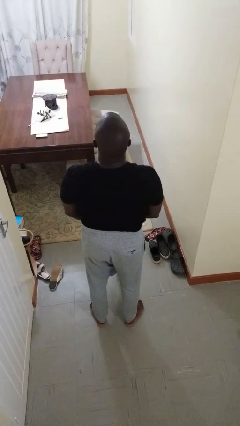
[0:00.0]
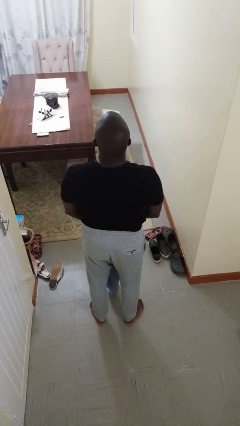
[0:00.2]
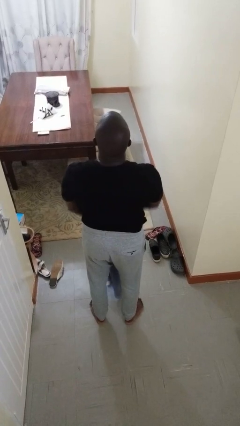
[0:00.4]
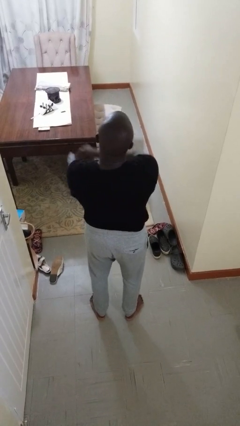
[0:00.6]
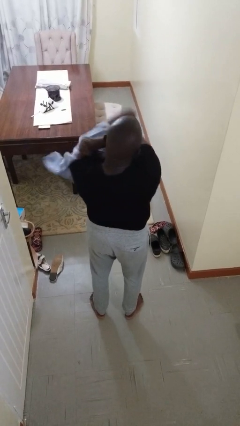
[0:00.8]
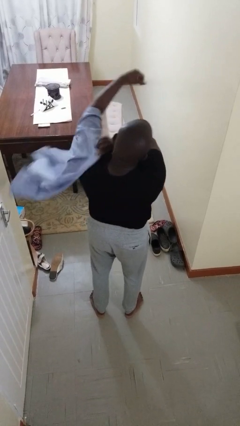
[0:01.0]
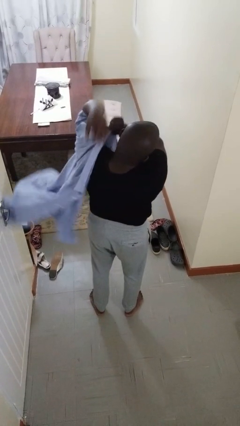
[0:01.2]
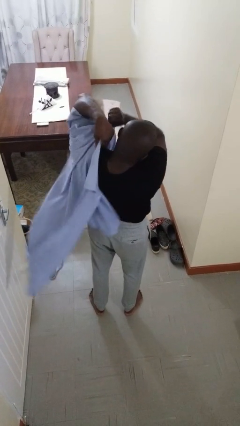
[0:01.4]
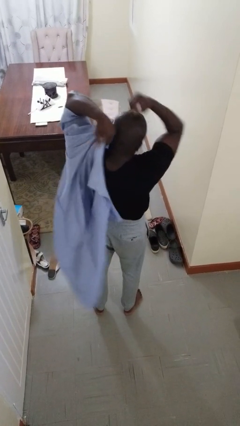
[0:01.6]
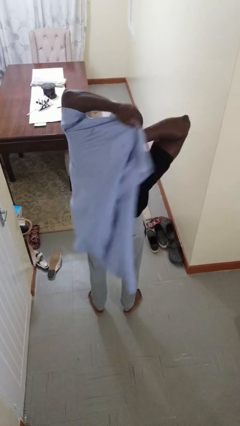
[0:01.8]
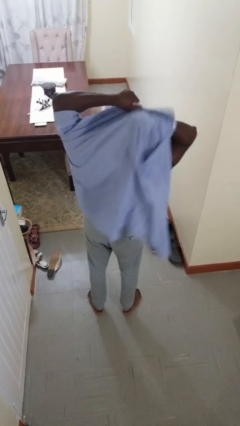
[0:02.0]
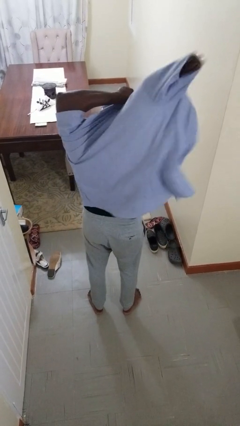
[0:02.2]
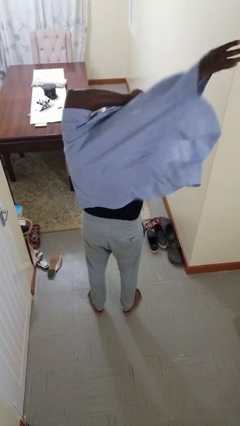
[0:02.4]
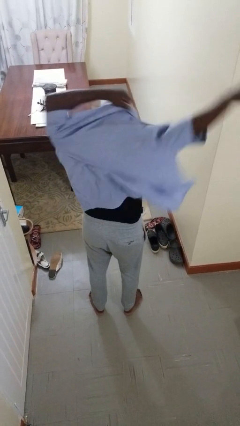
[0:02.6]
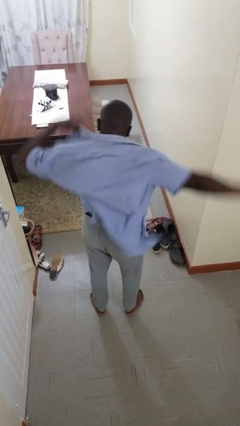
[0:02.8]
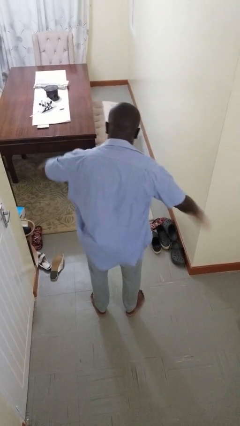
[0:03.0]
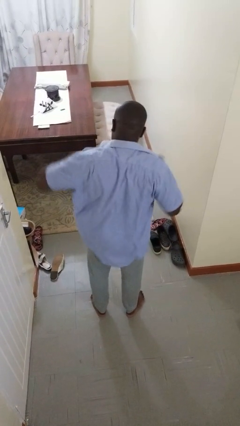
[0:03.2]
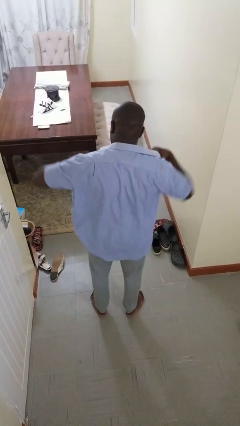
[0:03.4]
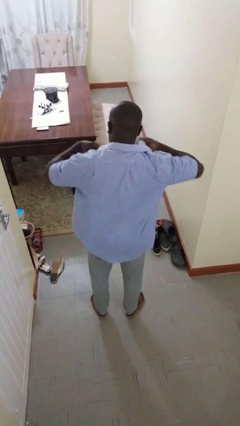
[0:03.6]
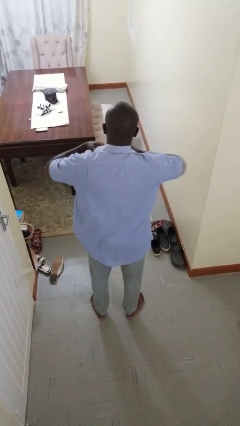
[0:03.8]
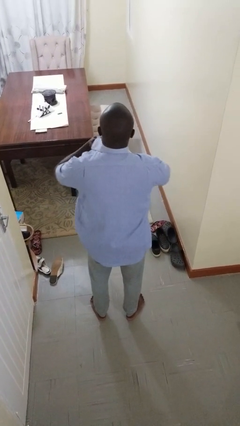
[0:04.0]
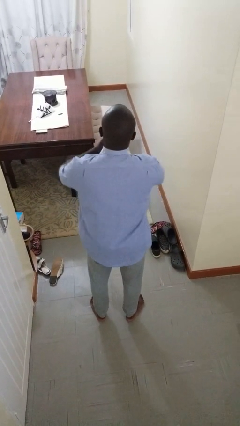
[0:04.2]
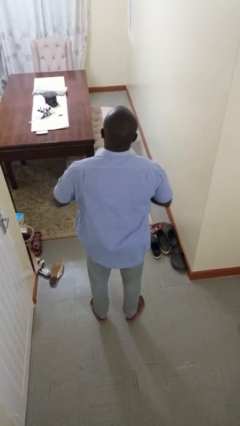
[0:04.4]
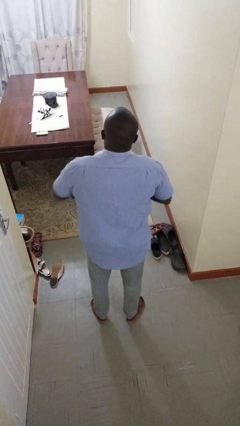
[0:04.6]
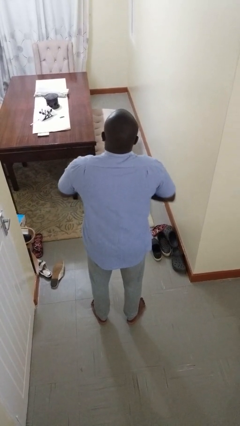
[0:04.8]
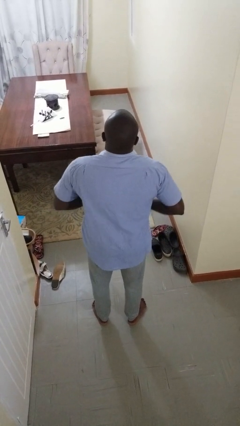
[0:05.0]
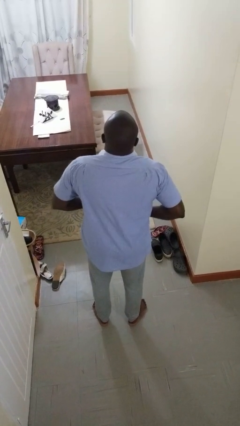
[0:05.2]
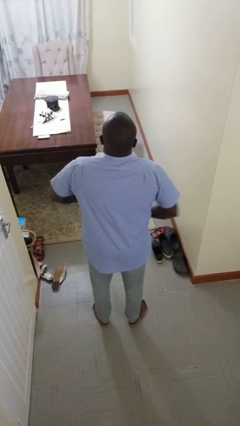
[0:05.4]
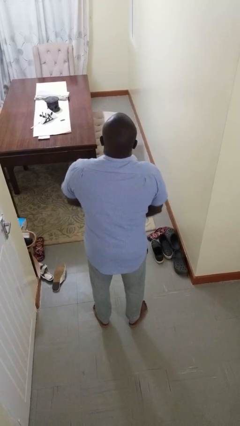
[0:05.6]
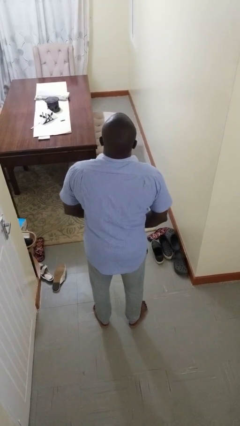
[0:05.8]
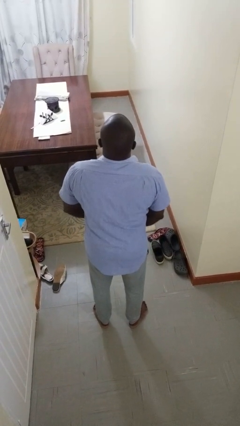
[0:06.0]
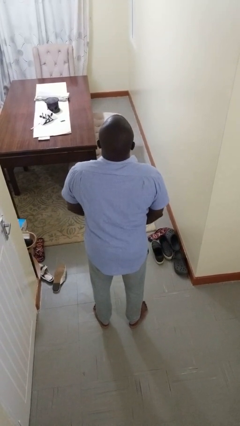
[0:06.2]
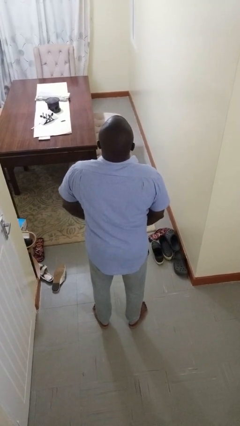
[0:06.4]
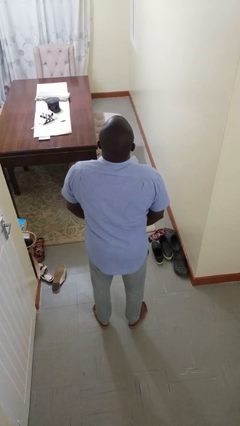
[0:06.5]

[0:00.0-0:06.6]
person puts on shirt

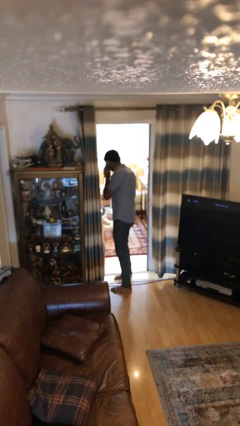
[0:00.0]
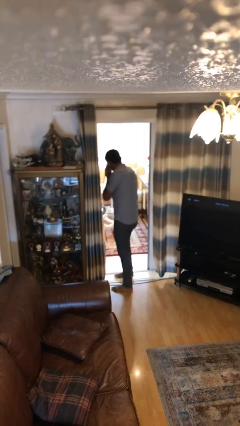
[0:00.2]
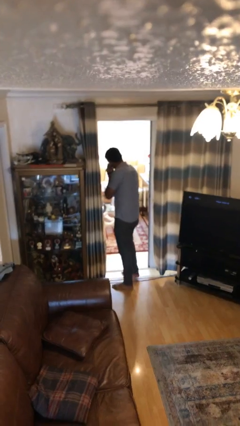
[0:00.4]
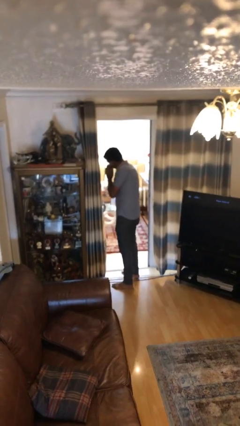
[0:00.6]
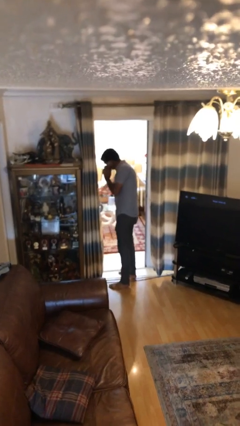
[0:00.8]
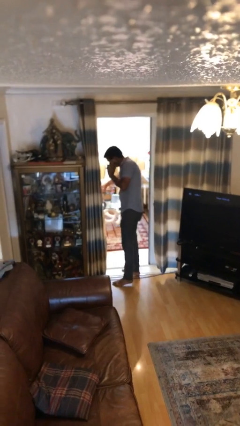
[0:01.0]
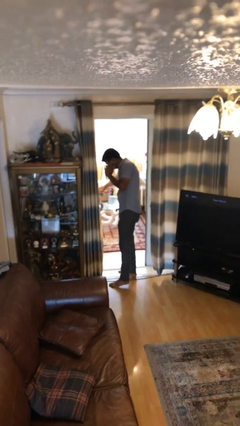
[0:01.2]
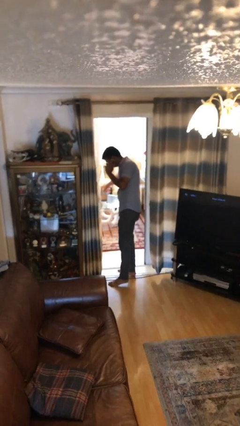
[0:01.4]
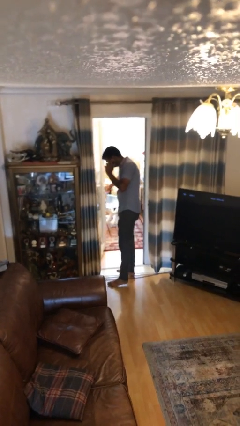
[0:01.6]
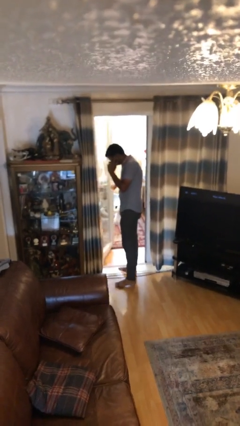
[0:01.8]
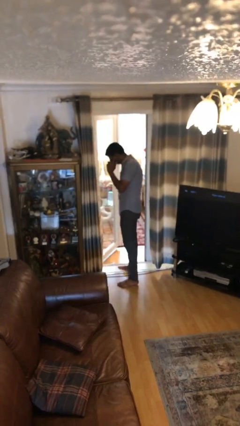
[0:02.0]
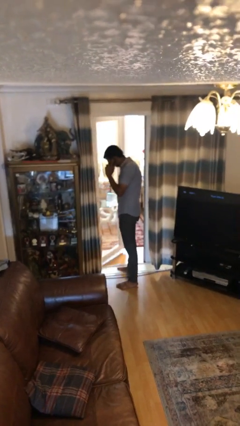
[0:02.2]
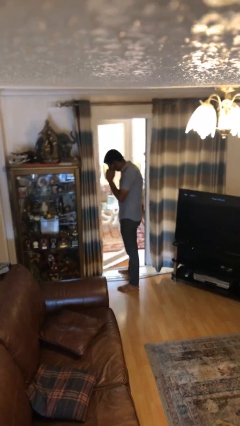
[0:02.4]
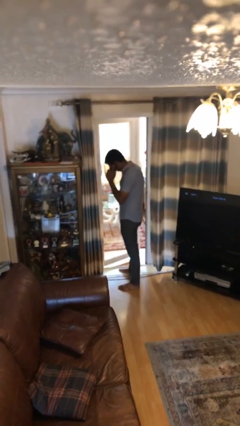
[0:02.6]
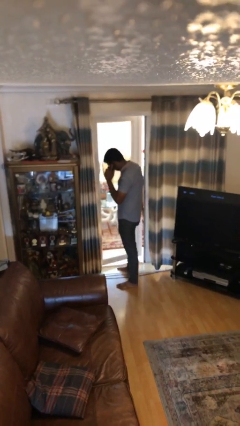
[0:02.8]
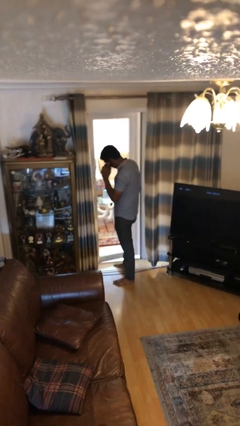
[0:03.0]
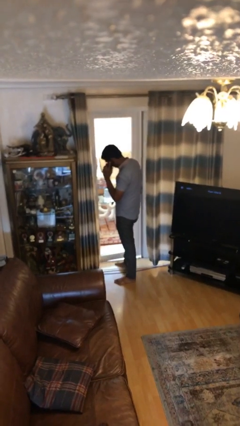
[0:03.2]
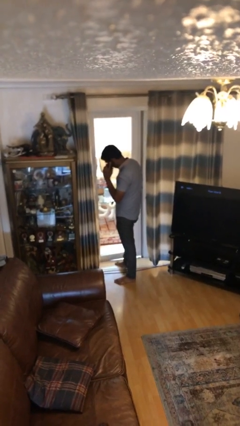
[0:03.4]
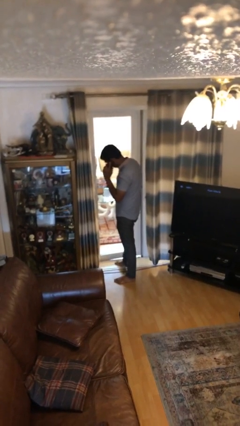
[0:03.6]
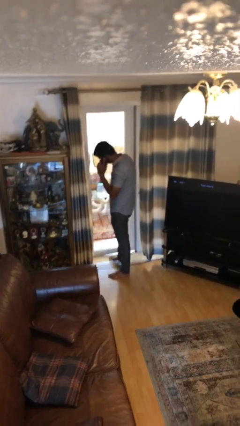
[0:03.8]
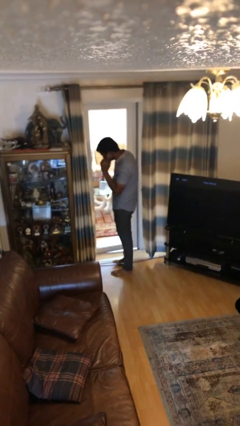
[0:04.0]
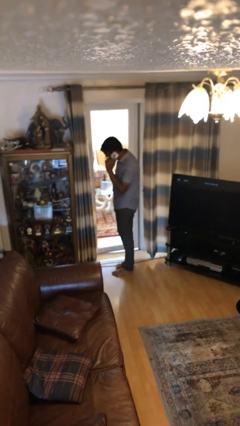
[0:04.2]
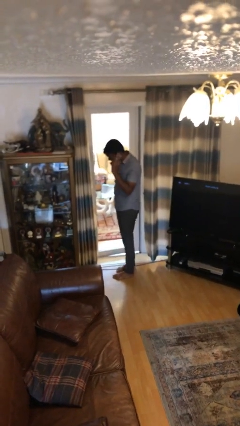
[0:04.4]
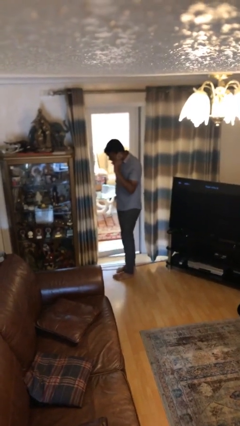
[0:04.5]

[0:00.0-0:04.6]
person closes facility door

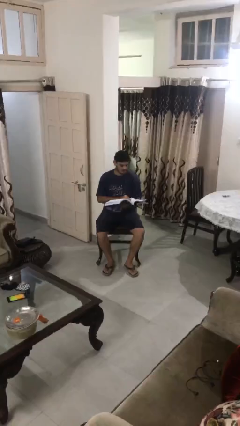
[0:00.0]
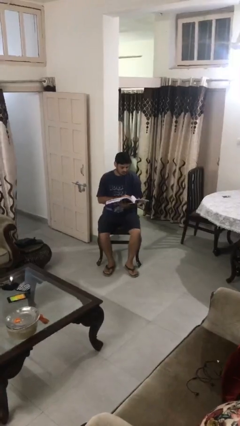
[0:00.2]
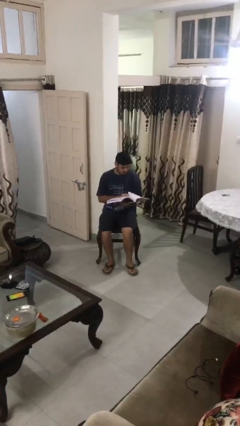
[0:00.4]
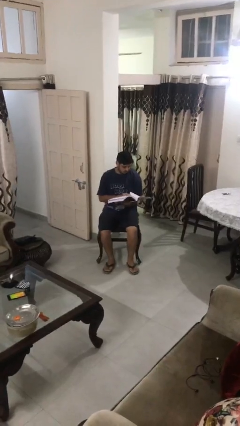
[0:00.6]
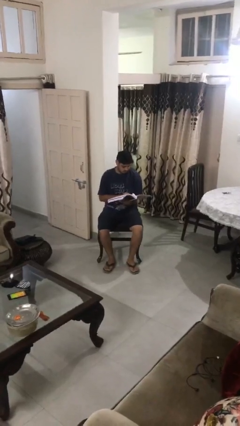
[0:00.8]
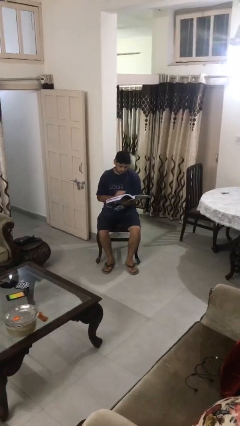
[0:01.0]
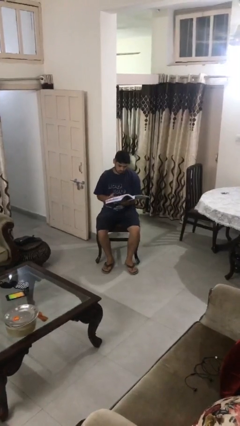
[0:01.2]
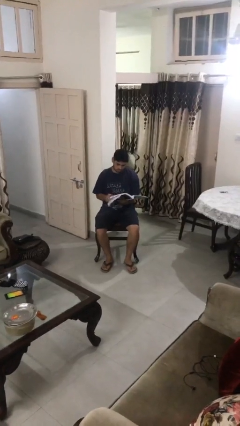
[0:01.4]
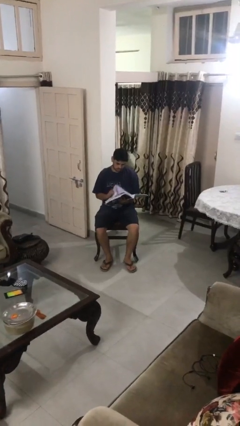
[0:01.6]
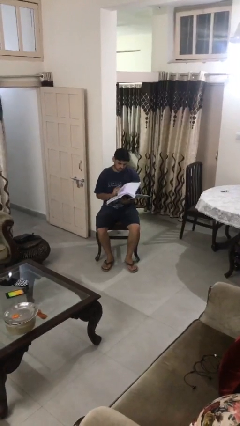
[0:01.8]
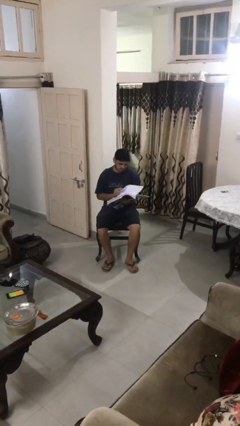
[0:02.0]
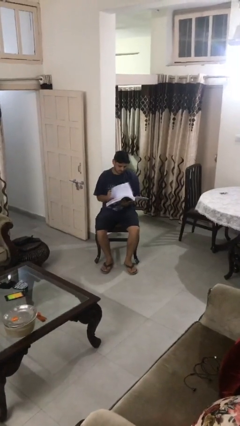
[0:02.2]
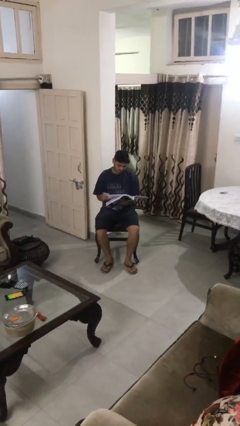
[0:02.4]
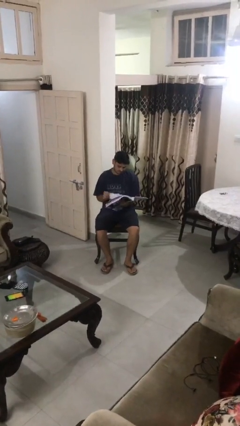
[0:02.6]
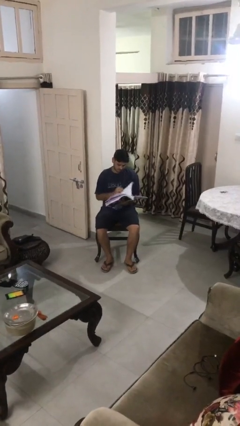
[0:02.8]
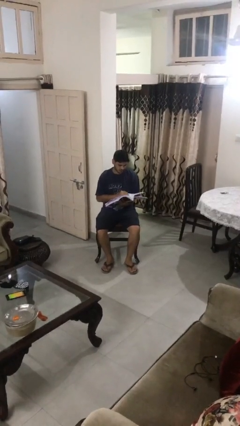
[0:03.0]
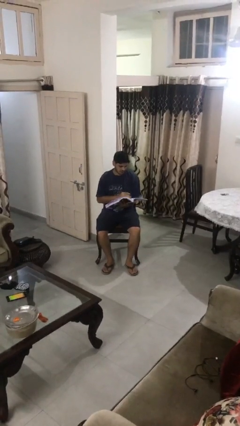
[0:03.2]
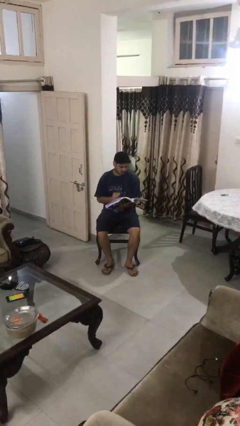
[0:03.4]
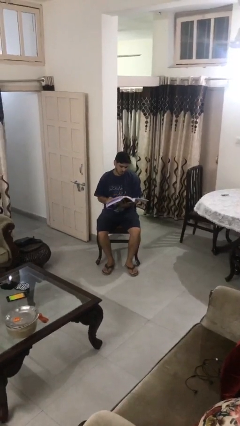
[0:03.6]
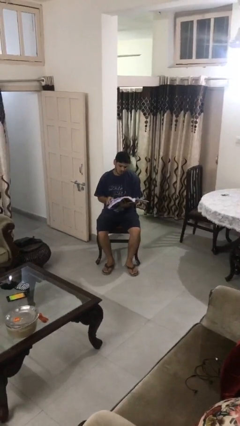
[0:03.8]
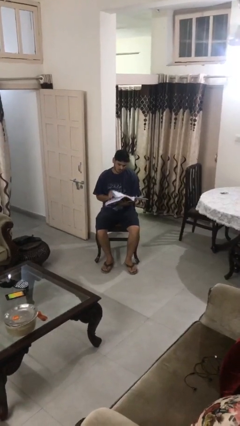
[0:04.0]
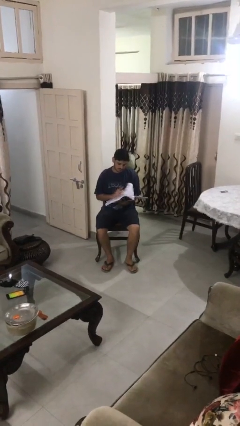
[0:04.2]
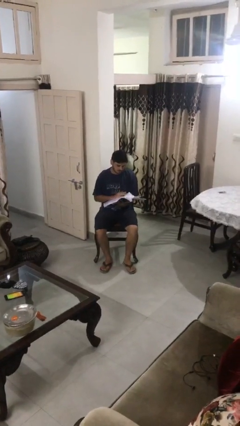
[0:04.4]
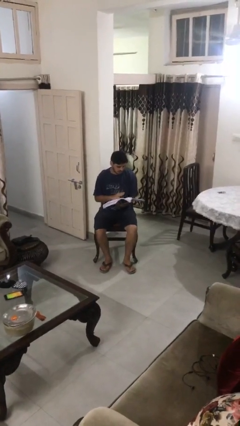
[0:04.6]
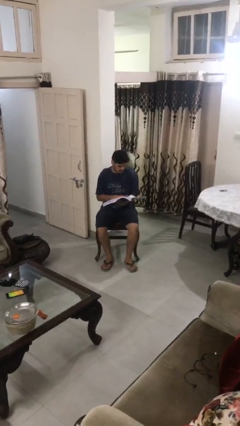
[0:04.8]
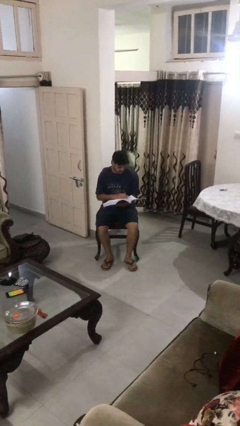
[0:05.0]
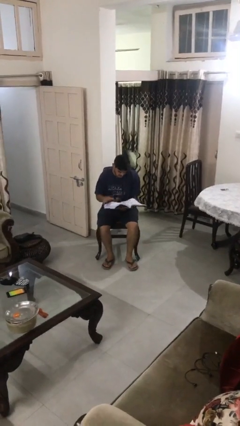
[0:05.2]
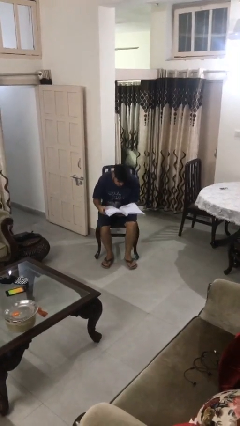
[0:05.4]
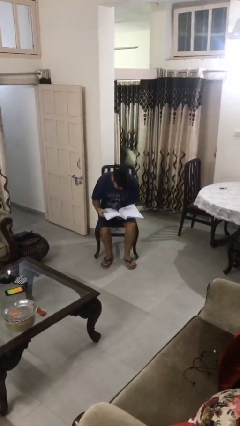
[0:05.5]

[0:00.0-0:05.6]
person reads document

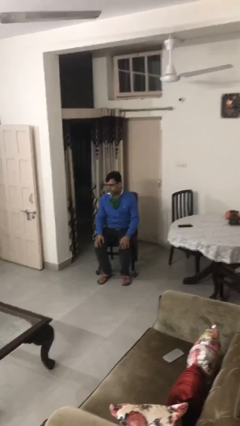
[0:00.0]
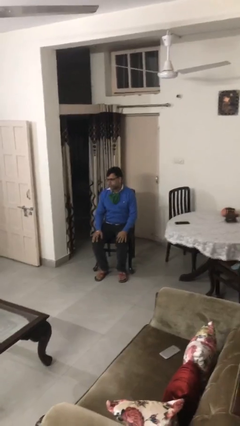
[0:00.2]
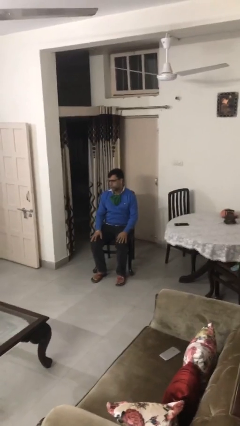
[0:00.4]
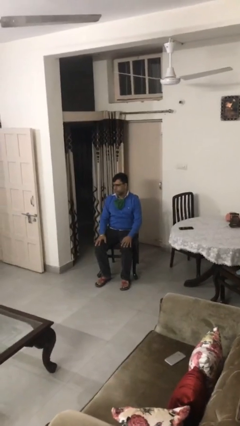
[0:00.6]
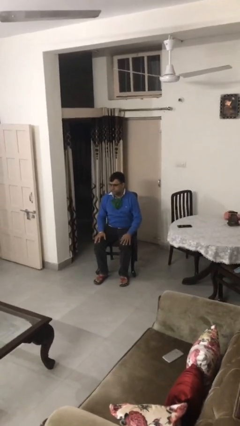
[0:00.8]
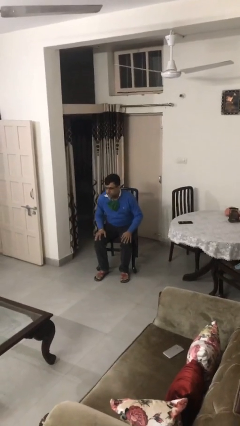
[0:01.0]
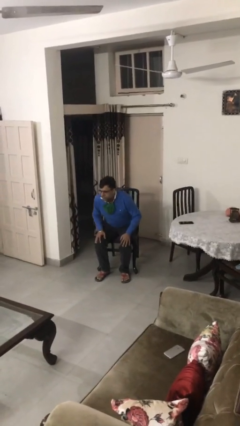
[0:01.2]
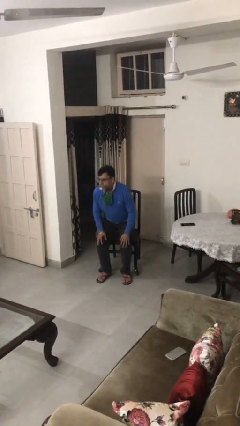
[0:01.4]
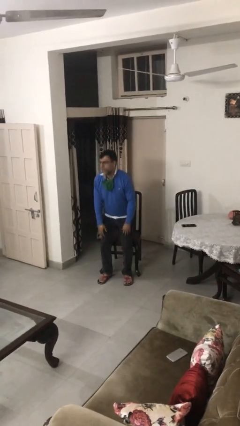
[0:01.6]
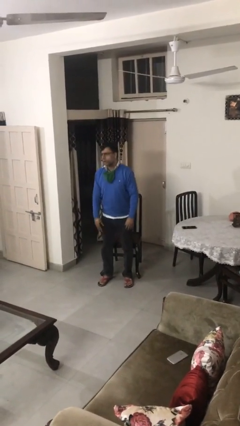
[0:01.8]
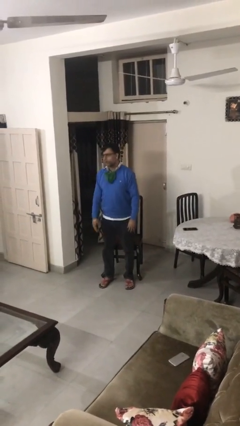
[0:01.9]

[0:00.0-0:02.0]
person stands up
